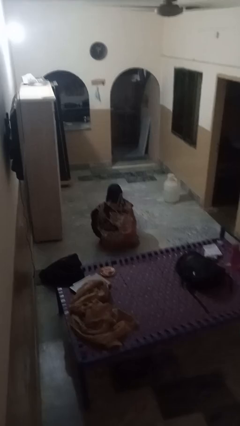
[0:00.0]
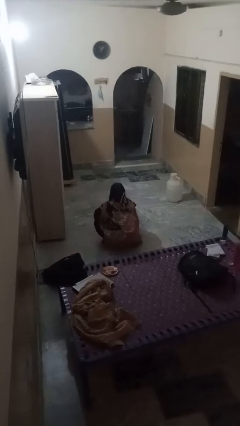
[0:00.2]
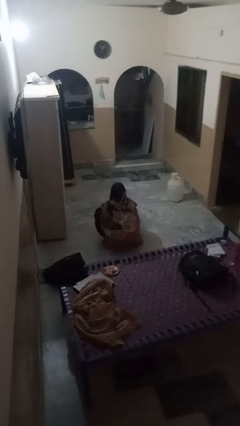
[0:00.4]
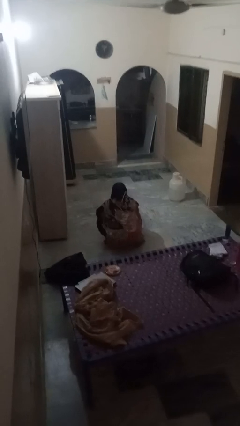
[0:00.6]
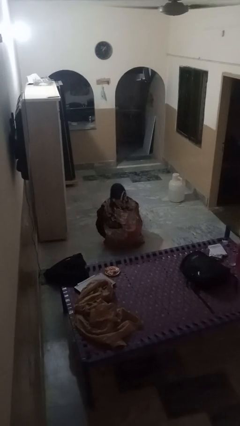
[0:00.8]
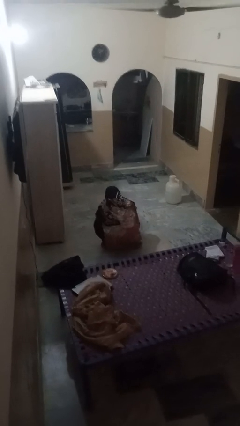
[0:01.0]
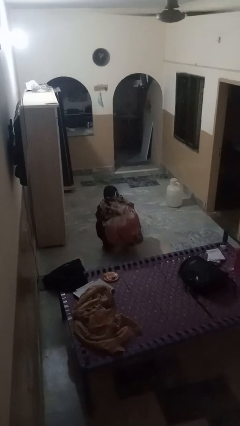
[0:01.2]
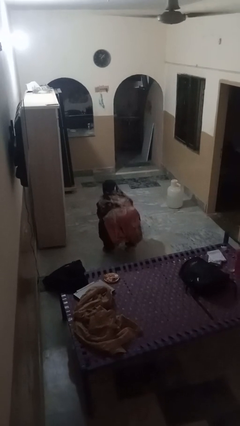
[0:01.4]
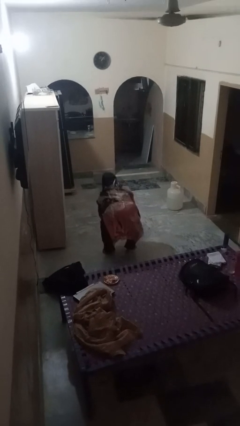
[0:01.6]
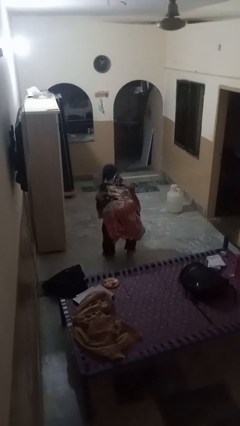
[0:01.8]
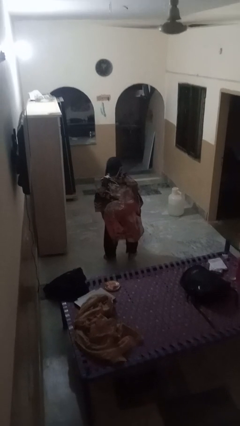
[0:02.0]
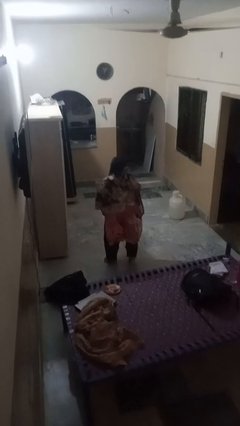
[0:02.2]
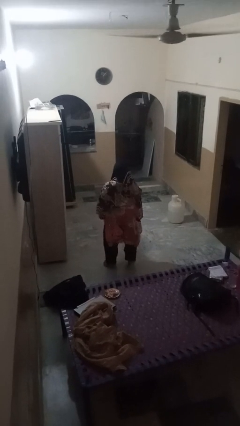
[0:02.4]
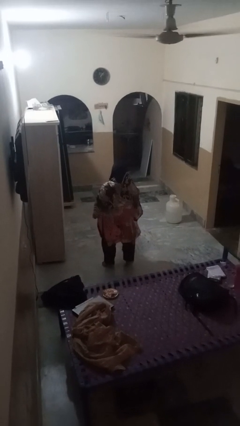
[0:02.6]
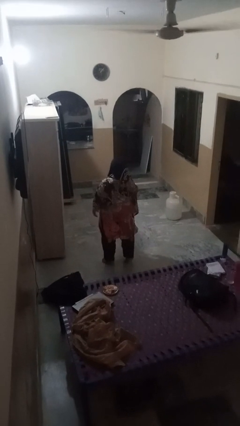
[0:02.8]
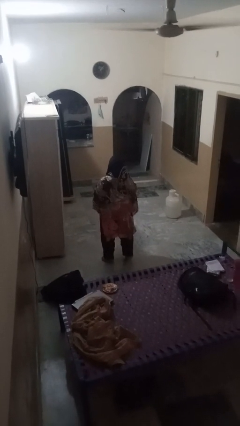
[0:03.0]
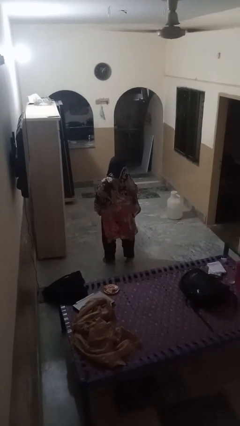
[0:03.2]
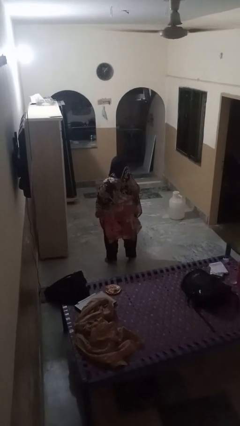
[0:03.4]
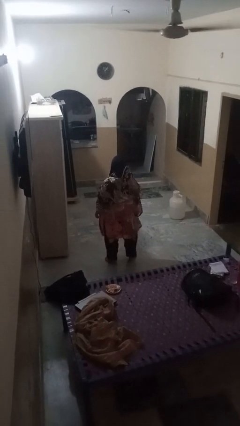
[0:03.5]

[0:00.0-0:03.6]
person stands up

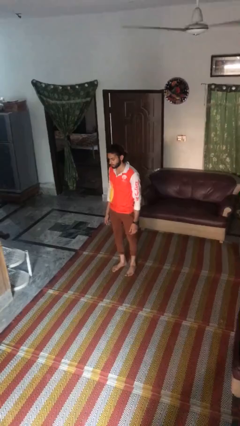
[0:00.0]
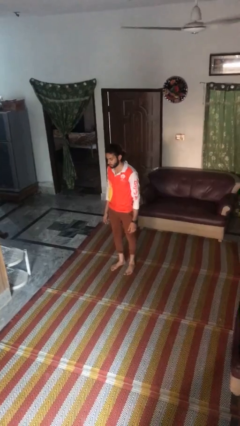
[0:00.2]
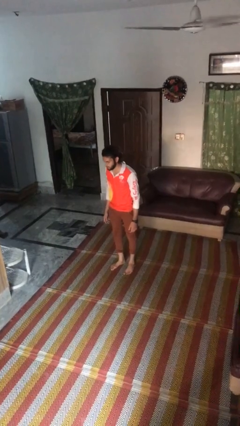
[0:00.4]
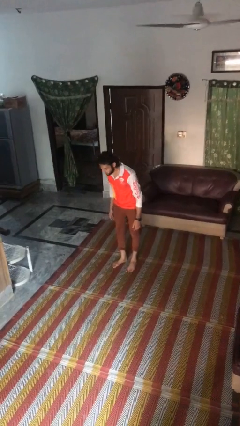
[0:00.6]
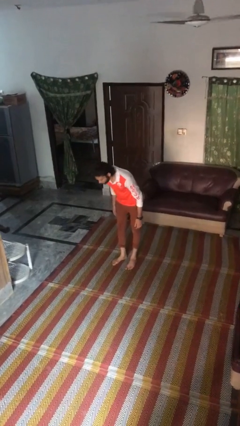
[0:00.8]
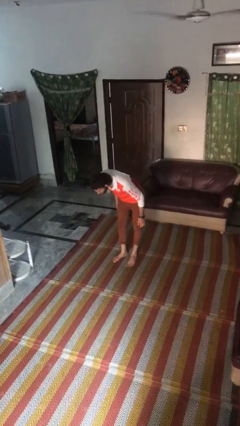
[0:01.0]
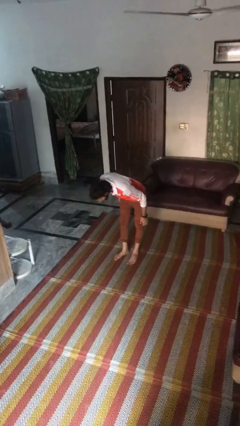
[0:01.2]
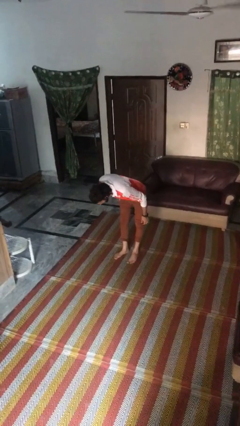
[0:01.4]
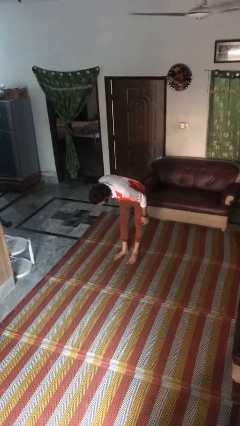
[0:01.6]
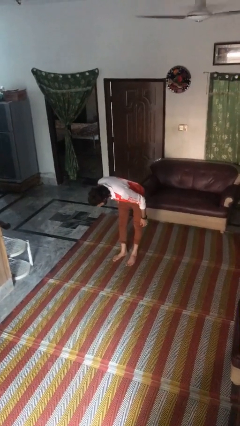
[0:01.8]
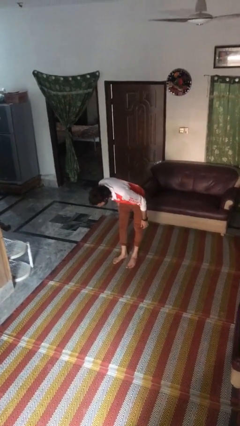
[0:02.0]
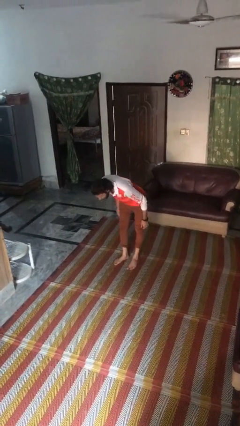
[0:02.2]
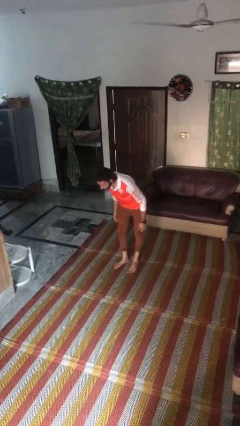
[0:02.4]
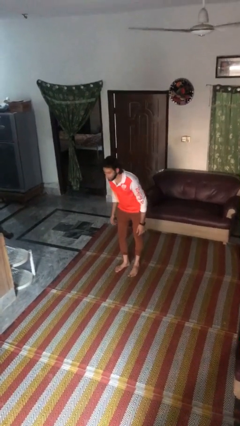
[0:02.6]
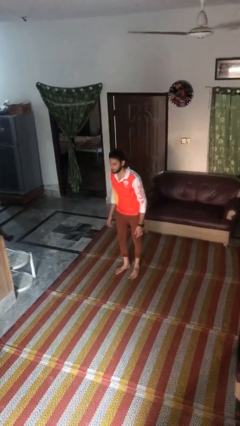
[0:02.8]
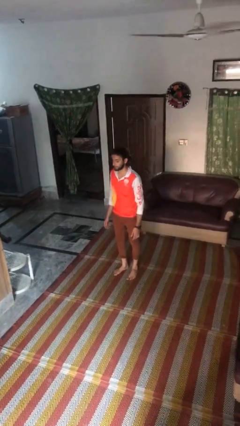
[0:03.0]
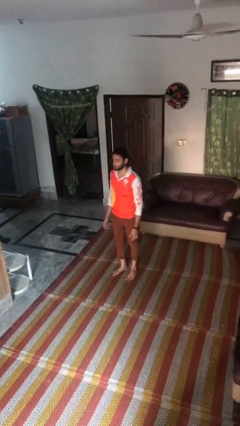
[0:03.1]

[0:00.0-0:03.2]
person bows

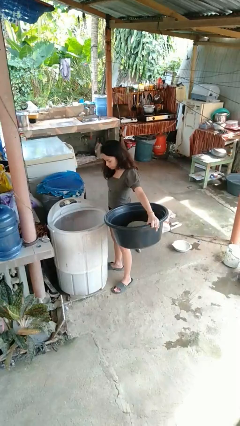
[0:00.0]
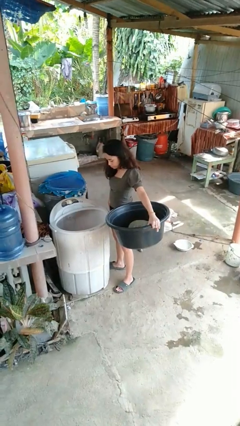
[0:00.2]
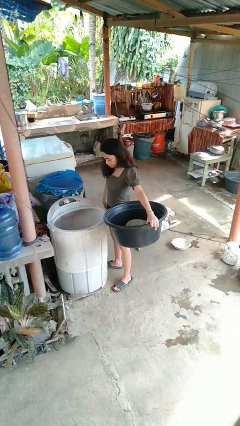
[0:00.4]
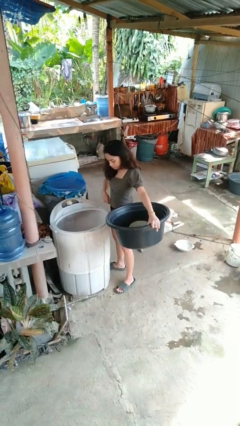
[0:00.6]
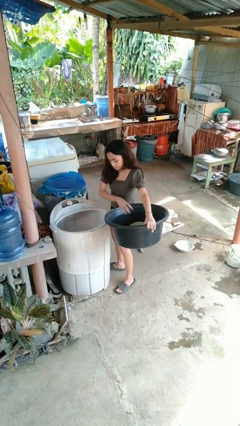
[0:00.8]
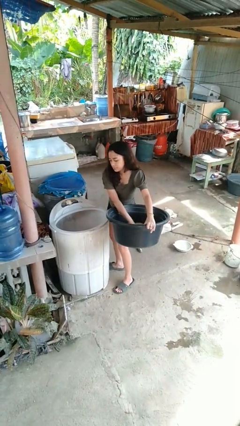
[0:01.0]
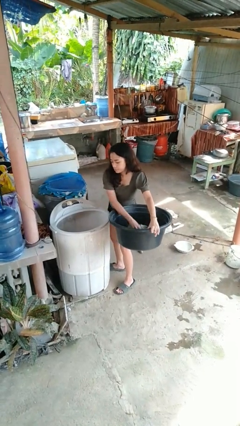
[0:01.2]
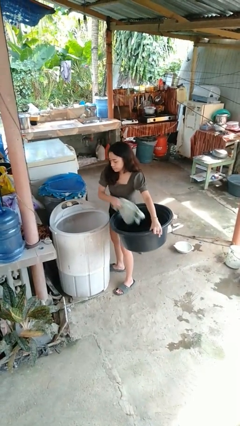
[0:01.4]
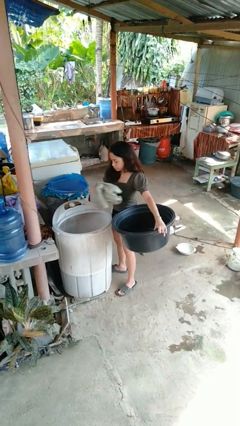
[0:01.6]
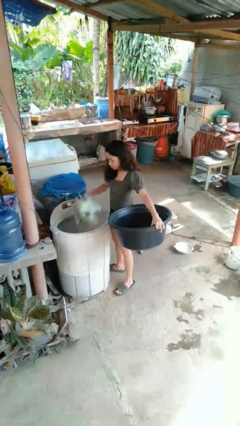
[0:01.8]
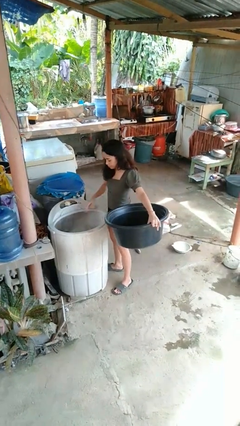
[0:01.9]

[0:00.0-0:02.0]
person loads clotheswasher

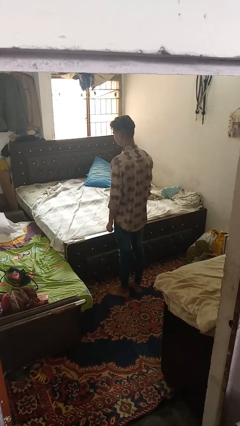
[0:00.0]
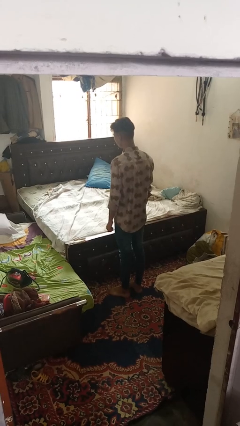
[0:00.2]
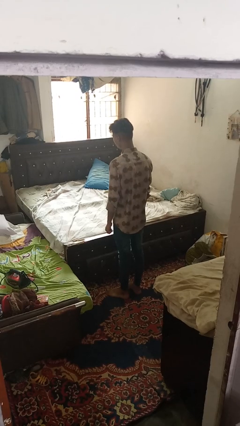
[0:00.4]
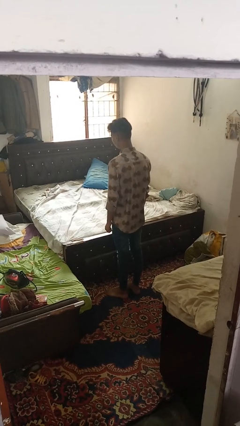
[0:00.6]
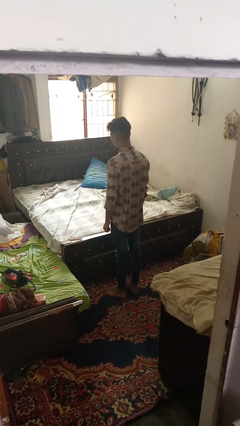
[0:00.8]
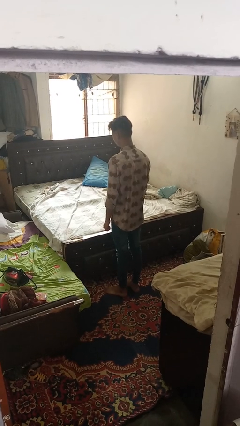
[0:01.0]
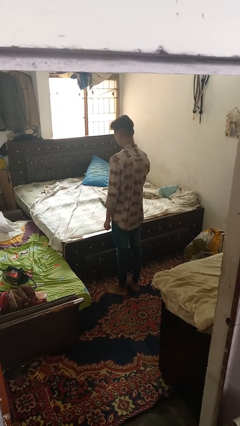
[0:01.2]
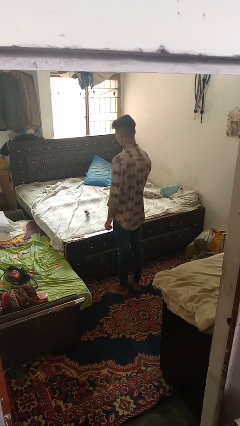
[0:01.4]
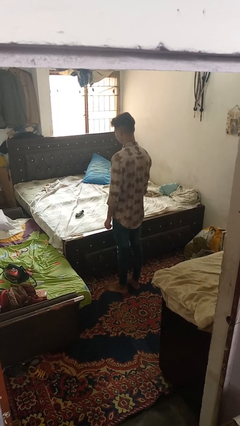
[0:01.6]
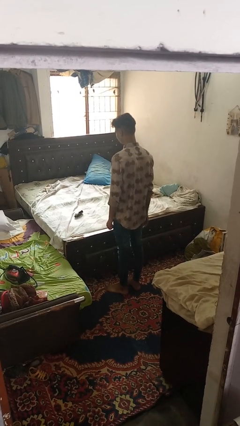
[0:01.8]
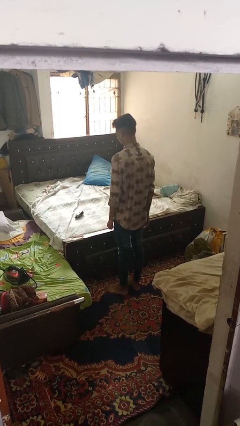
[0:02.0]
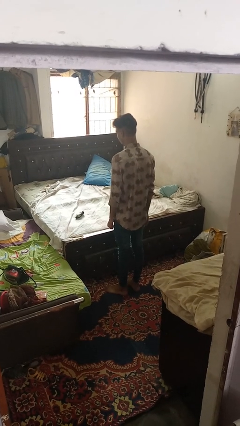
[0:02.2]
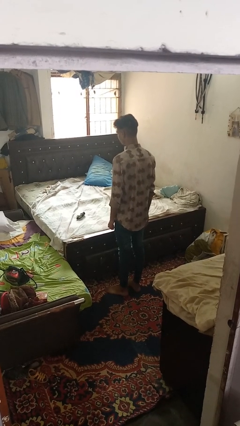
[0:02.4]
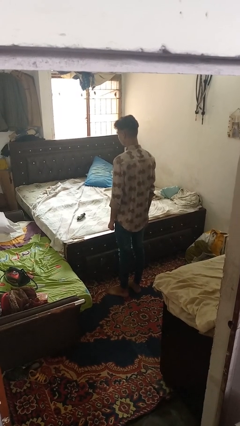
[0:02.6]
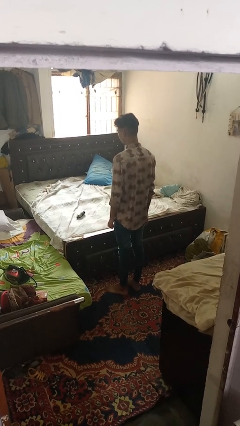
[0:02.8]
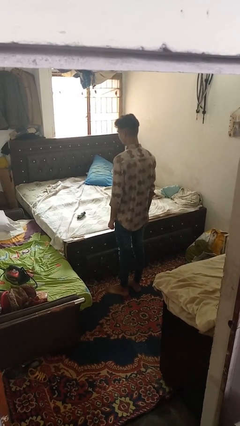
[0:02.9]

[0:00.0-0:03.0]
person throws object on bed
